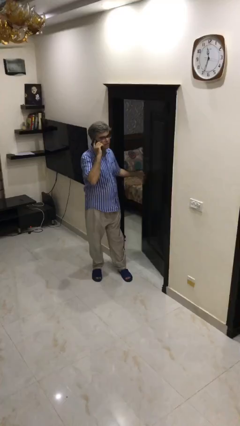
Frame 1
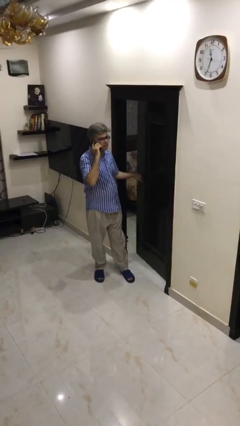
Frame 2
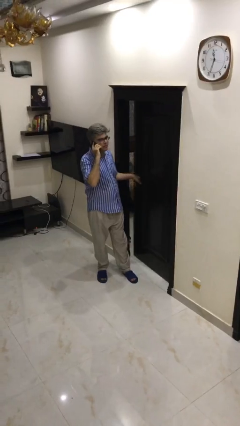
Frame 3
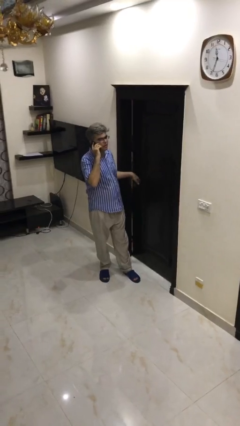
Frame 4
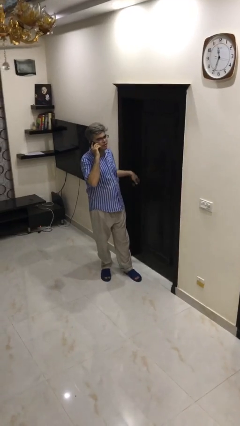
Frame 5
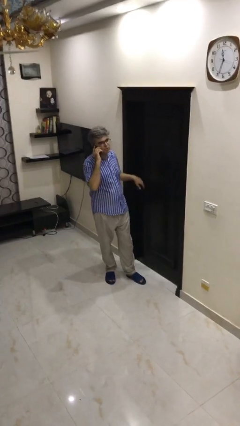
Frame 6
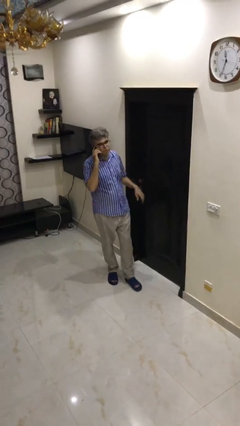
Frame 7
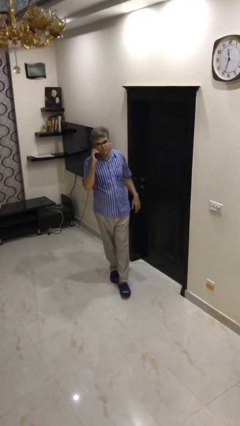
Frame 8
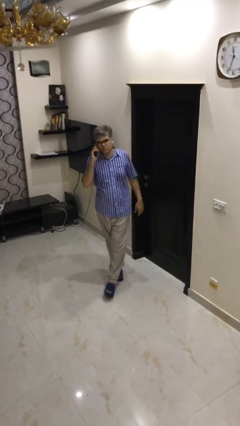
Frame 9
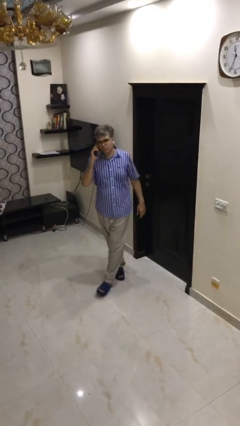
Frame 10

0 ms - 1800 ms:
person closes facility door

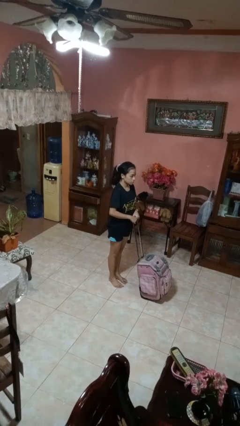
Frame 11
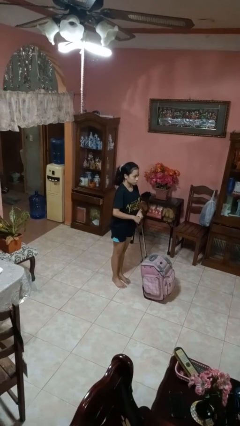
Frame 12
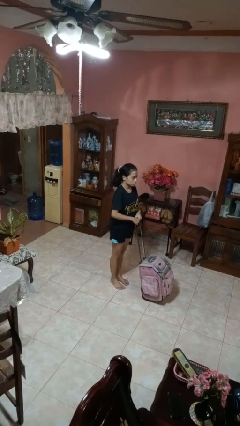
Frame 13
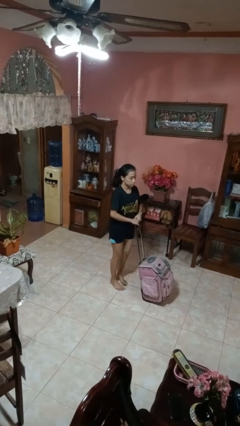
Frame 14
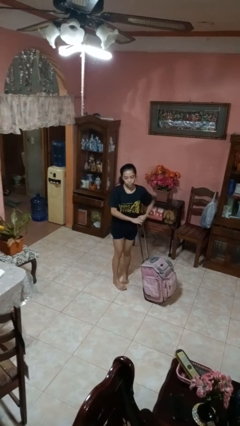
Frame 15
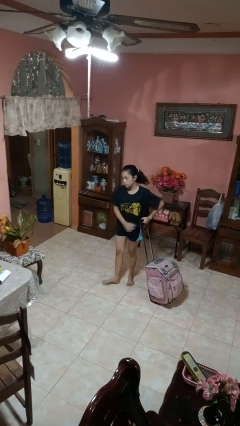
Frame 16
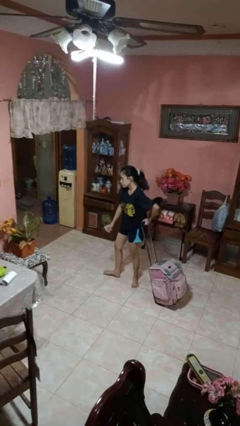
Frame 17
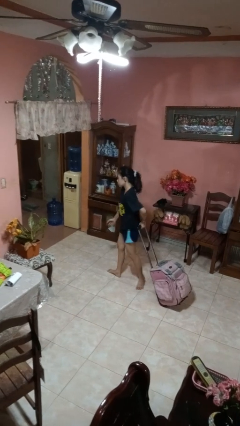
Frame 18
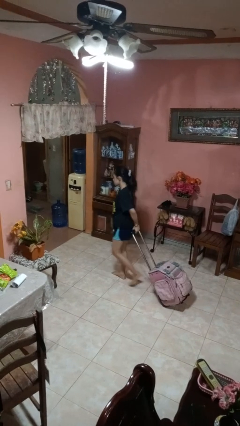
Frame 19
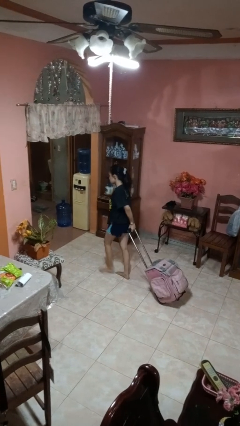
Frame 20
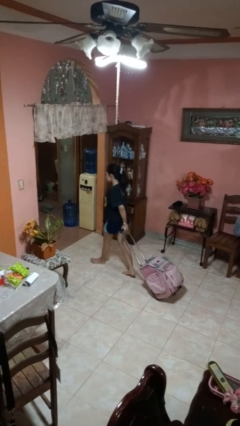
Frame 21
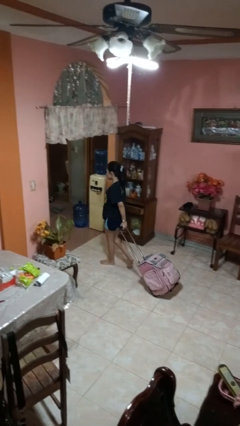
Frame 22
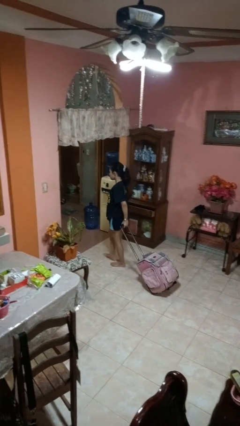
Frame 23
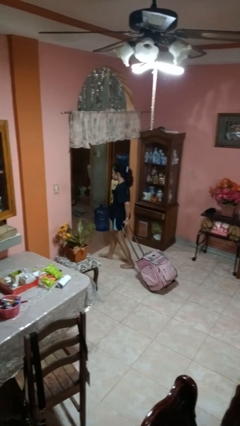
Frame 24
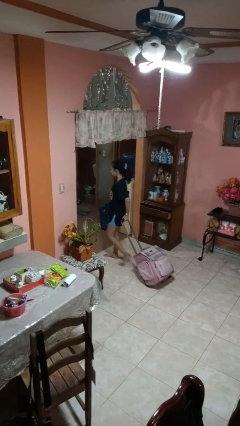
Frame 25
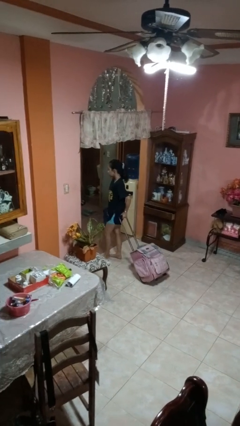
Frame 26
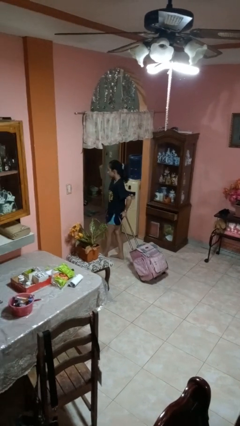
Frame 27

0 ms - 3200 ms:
person pulls wheeled cart

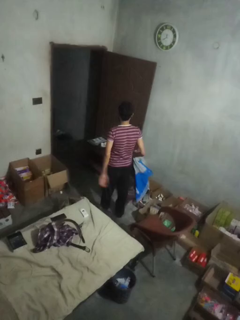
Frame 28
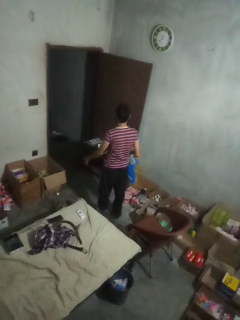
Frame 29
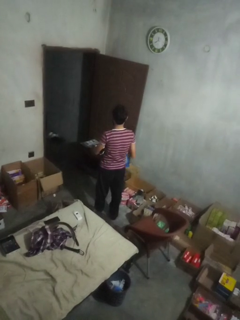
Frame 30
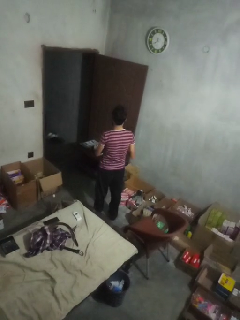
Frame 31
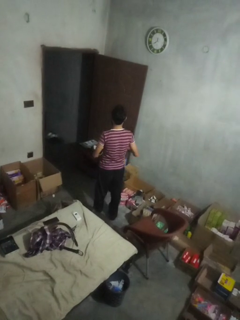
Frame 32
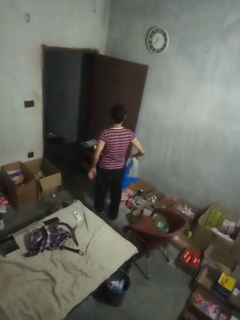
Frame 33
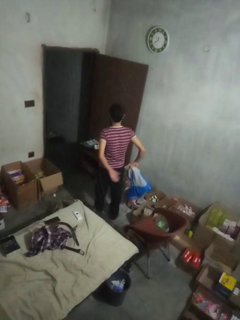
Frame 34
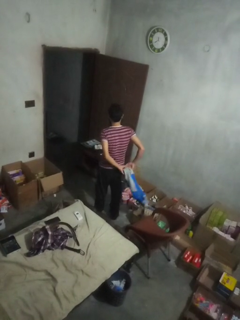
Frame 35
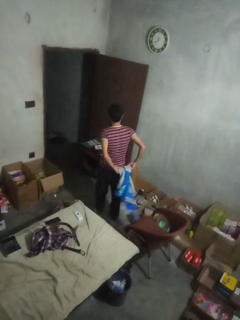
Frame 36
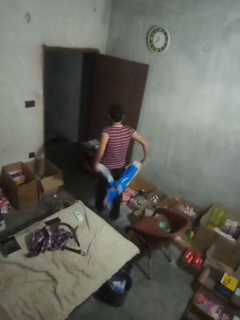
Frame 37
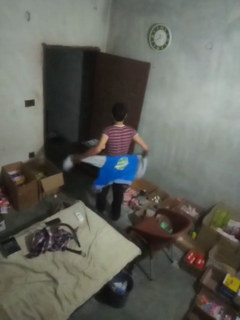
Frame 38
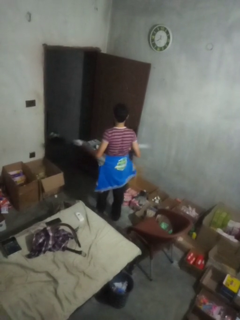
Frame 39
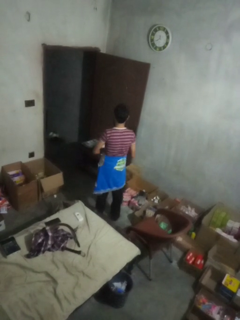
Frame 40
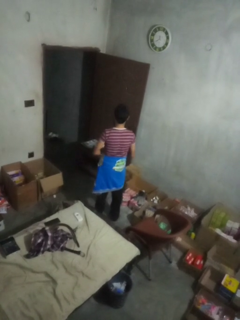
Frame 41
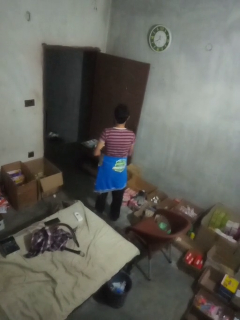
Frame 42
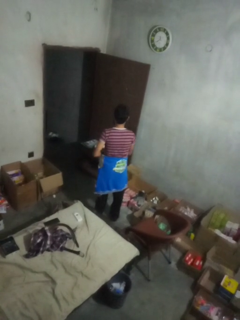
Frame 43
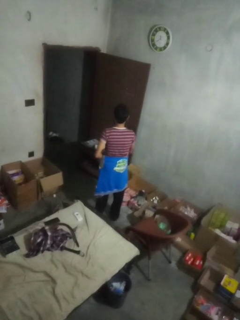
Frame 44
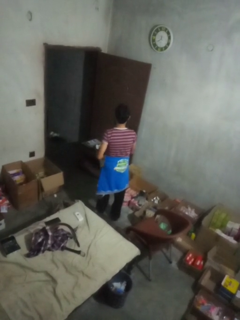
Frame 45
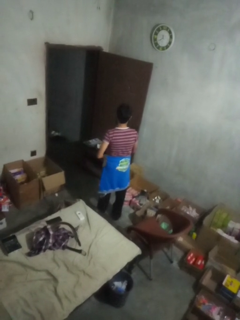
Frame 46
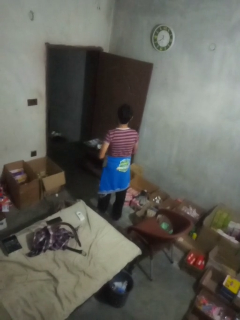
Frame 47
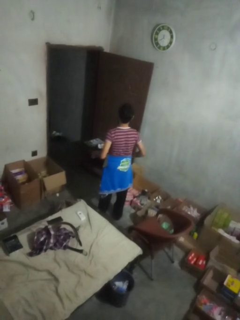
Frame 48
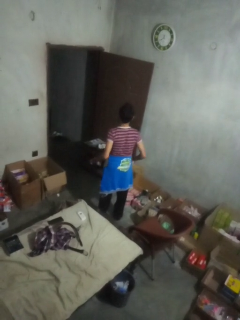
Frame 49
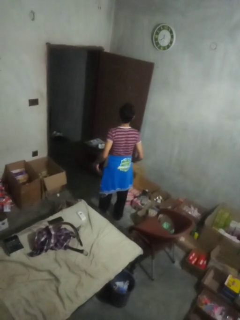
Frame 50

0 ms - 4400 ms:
person ties jacket around waist

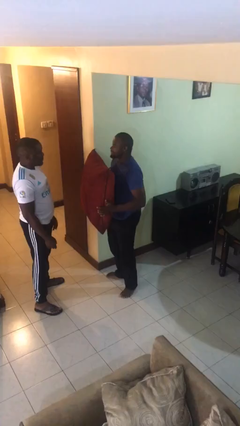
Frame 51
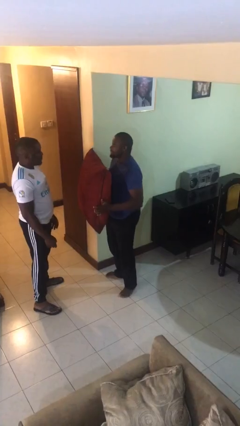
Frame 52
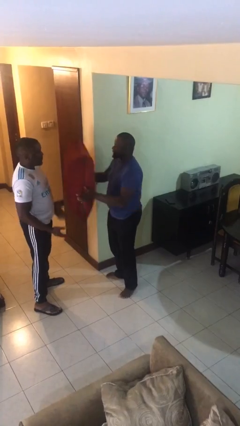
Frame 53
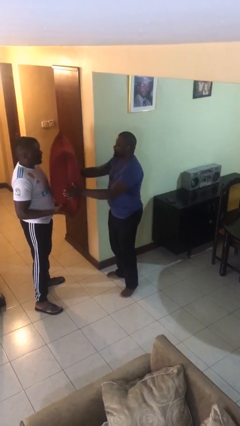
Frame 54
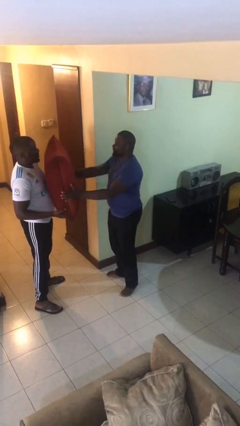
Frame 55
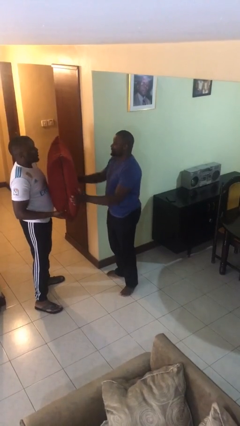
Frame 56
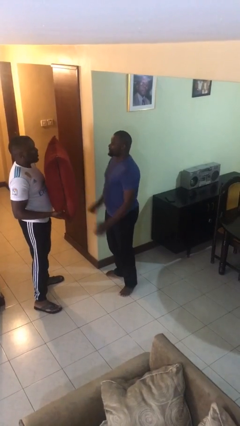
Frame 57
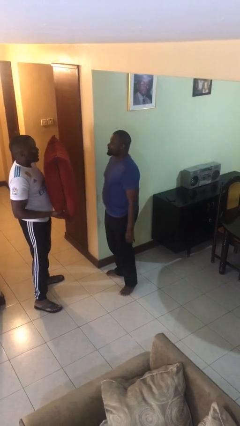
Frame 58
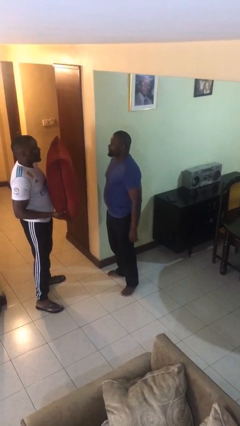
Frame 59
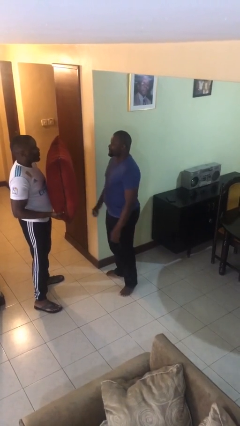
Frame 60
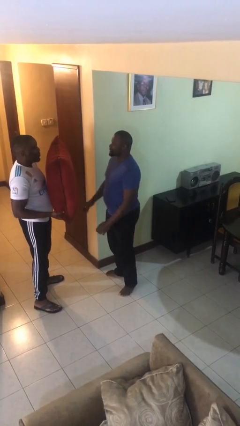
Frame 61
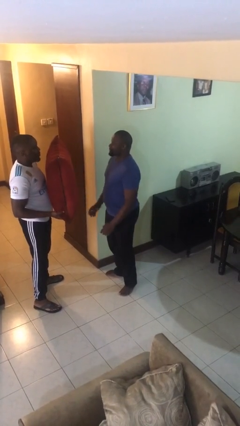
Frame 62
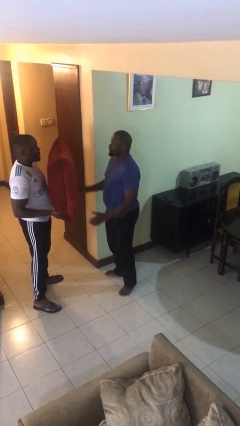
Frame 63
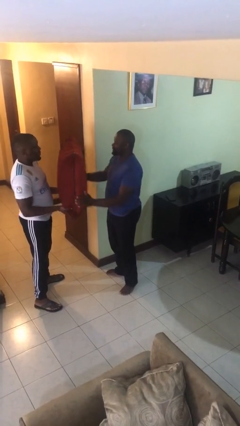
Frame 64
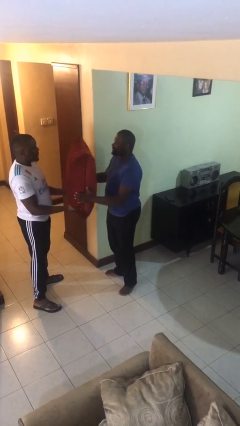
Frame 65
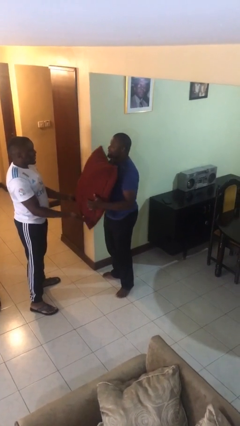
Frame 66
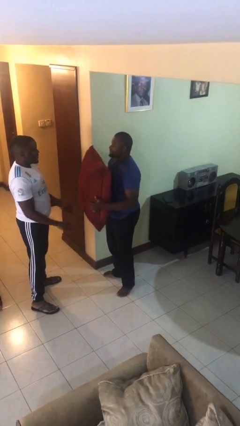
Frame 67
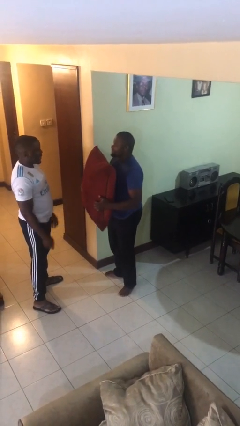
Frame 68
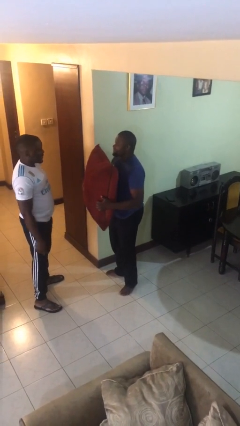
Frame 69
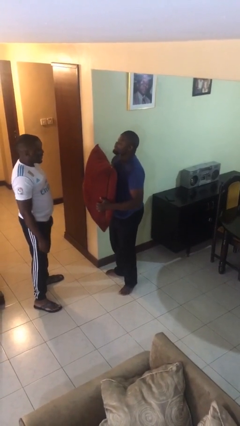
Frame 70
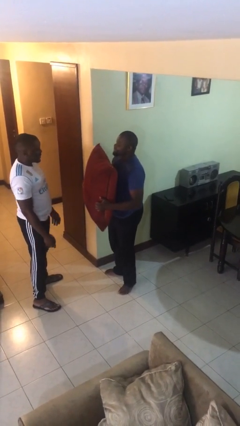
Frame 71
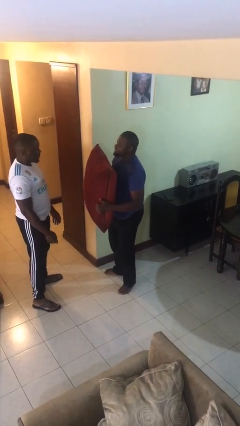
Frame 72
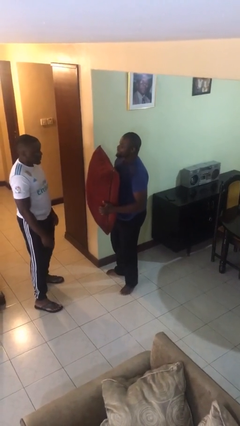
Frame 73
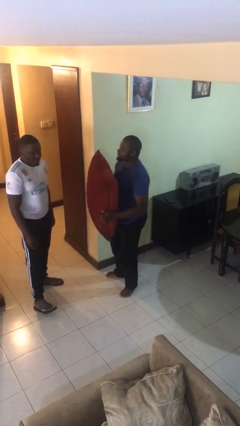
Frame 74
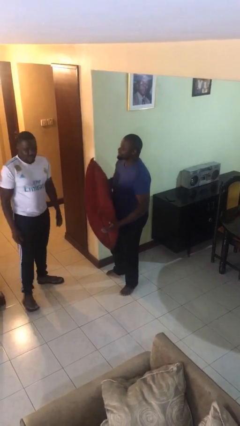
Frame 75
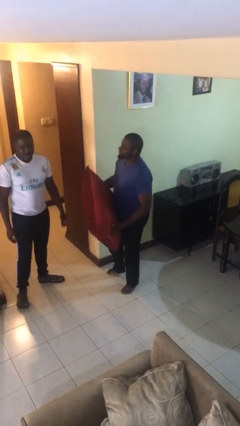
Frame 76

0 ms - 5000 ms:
person transfers object to person

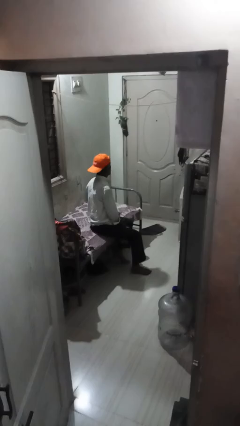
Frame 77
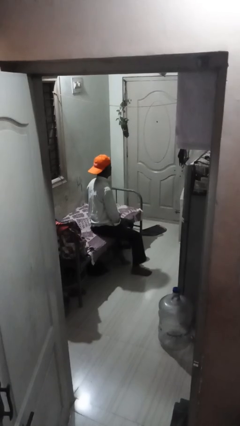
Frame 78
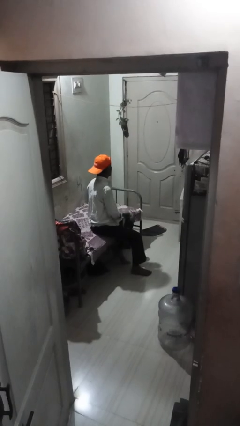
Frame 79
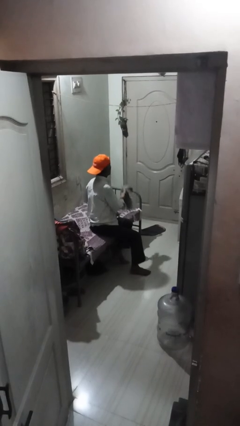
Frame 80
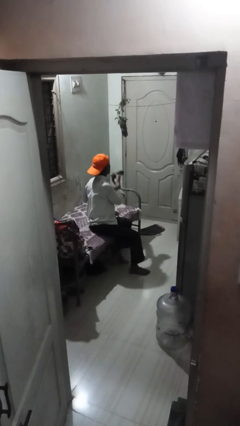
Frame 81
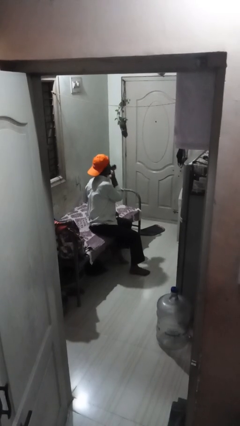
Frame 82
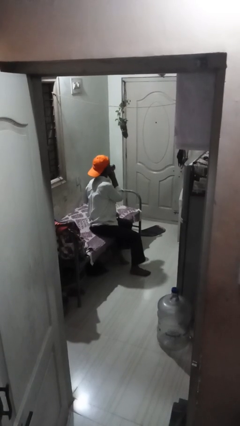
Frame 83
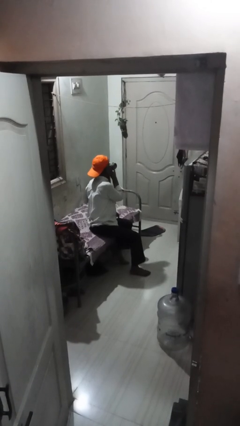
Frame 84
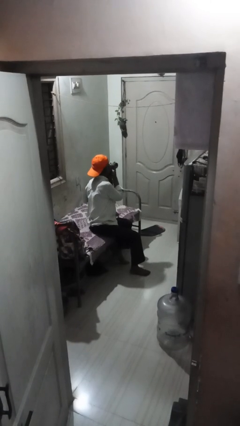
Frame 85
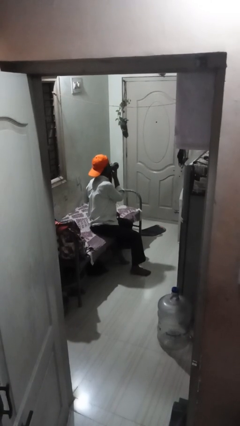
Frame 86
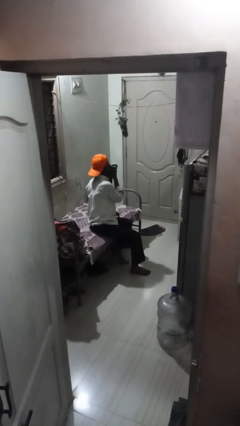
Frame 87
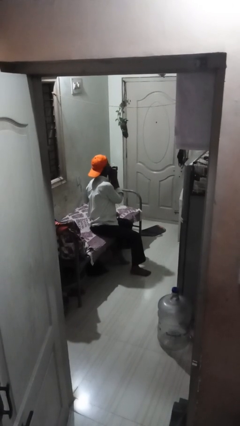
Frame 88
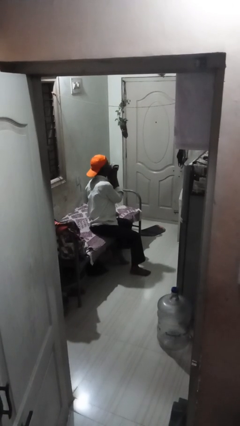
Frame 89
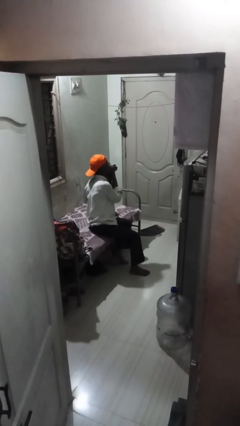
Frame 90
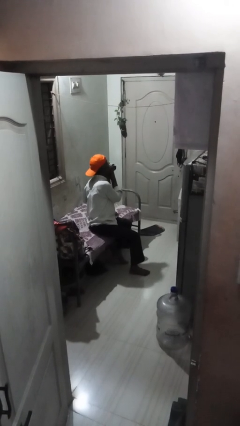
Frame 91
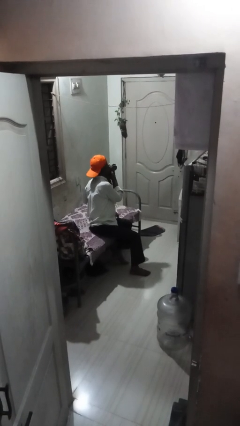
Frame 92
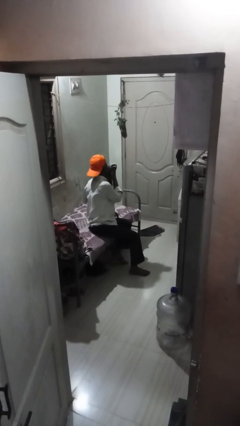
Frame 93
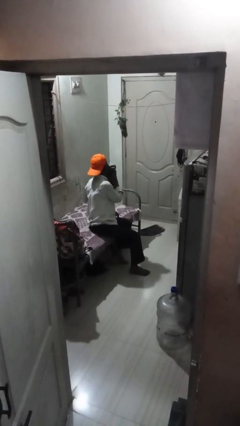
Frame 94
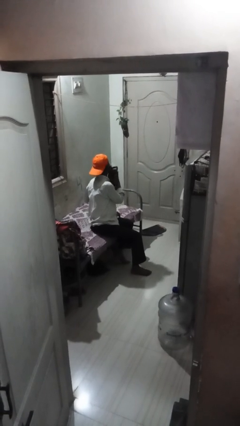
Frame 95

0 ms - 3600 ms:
person wipes mouth with napkin

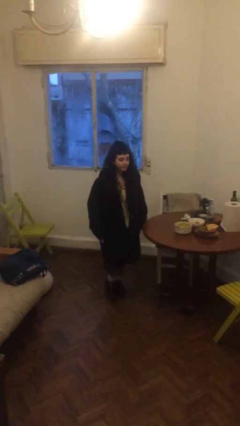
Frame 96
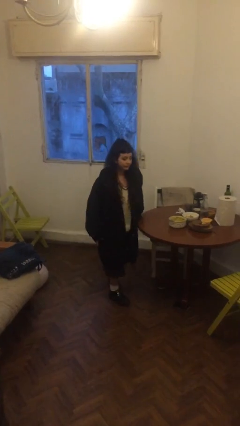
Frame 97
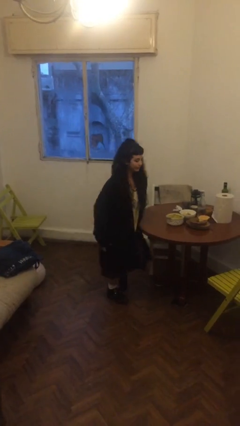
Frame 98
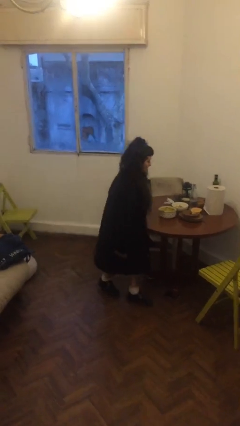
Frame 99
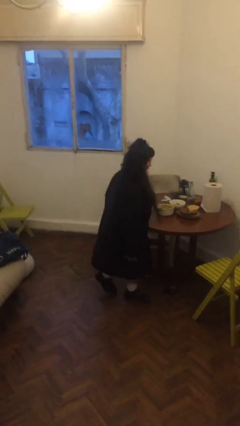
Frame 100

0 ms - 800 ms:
person bumps into table
